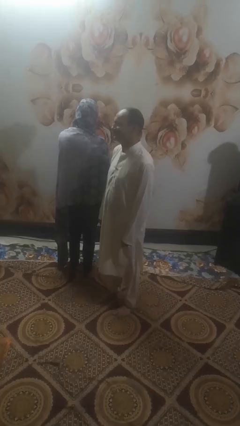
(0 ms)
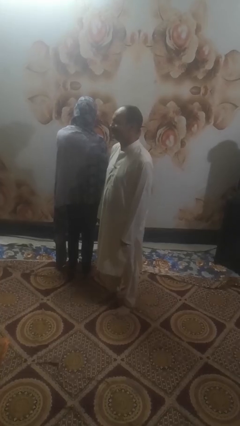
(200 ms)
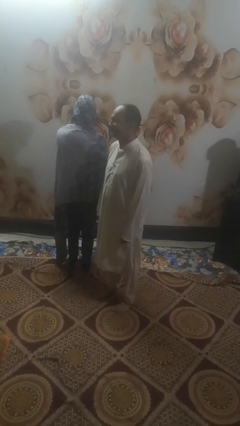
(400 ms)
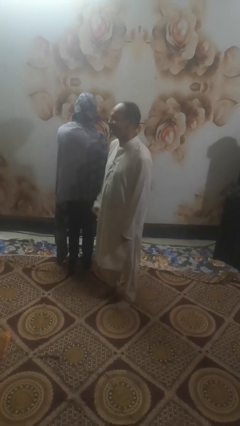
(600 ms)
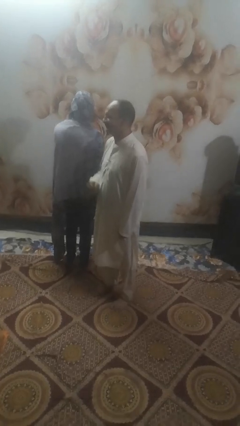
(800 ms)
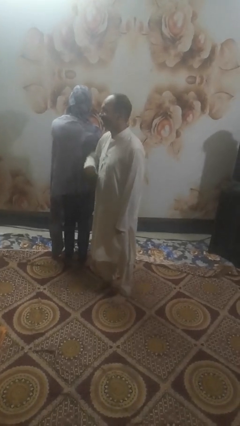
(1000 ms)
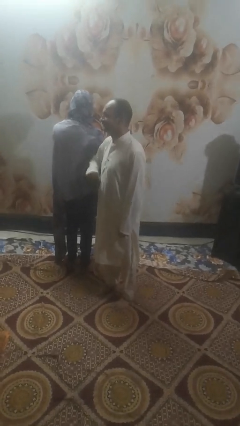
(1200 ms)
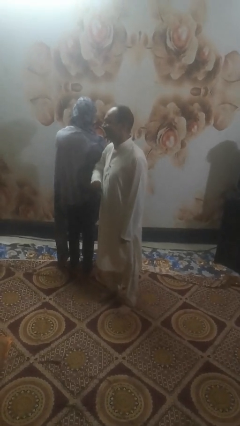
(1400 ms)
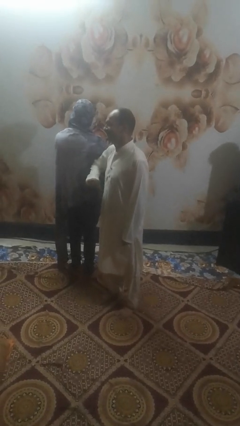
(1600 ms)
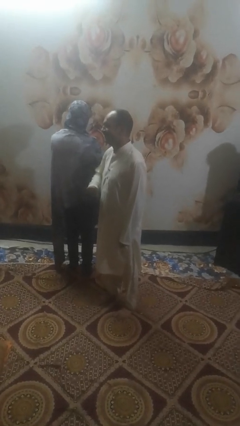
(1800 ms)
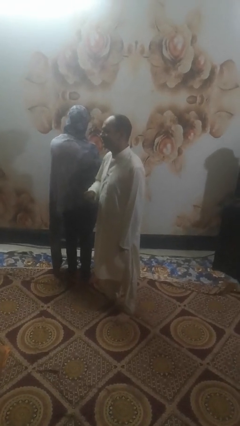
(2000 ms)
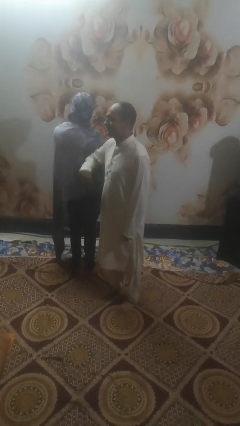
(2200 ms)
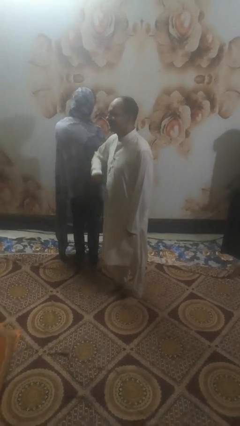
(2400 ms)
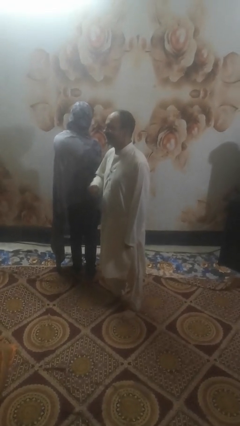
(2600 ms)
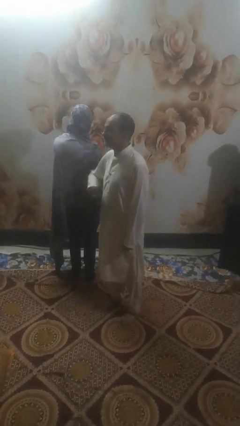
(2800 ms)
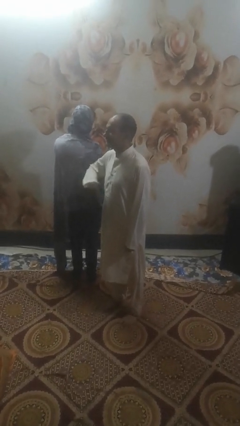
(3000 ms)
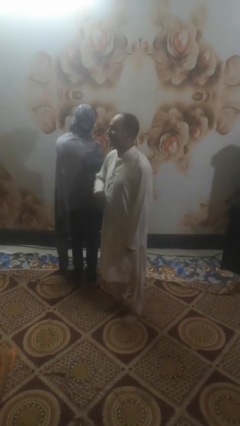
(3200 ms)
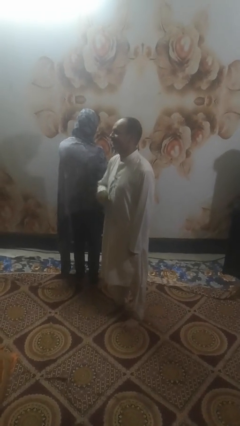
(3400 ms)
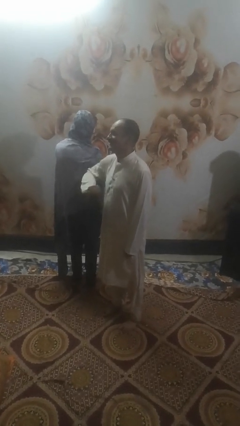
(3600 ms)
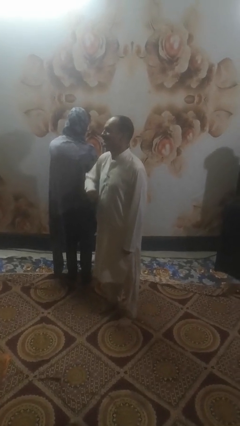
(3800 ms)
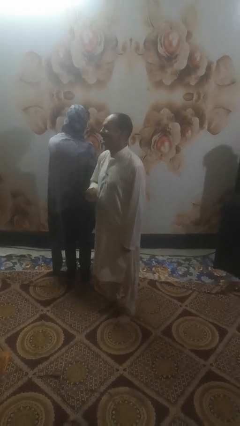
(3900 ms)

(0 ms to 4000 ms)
person nudges person with elbow

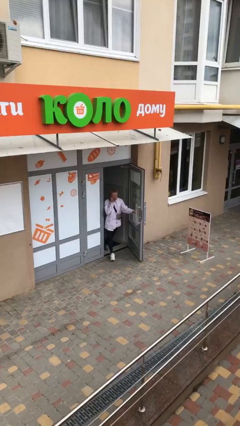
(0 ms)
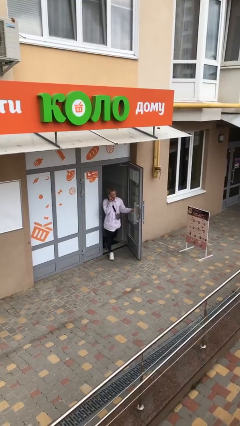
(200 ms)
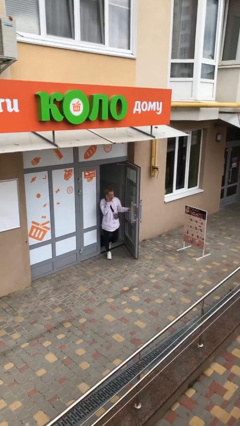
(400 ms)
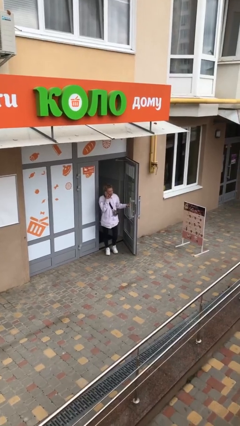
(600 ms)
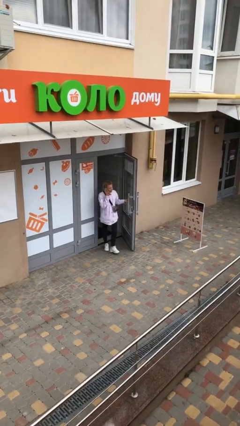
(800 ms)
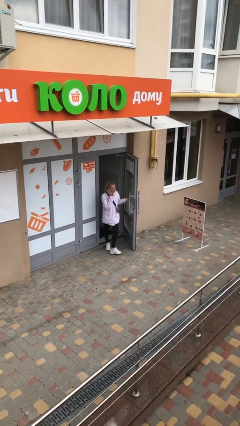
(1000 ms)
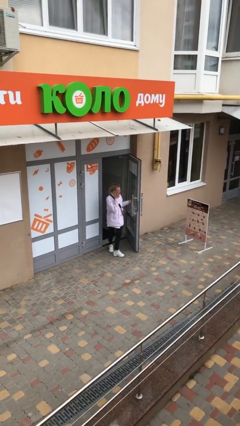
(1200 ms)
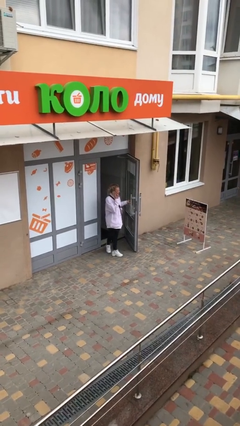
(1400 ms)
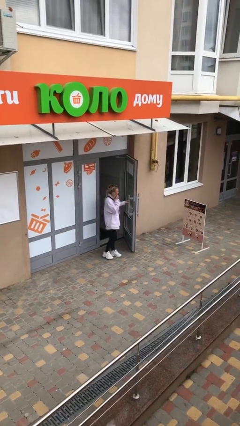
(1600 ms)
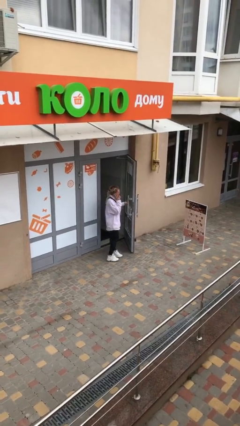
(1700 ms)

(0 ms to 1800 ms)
person enters scene through structure

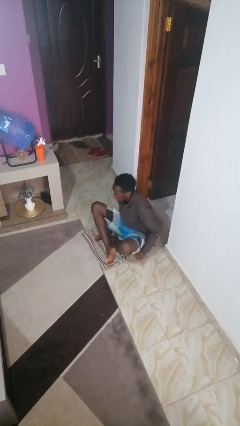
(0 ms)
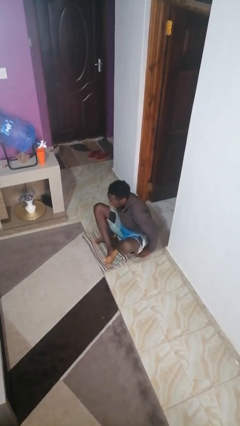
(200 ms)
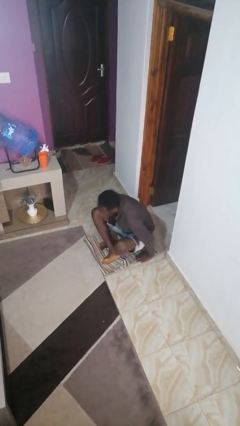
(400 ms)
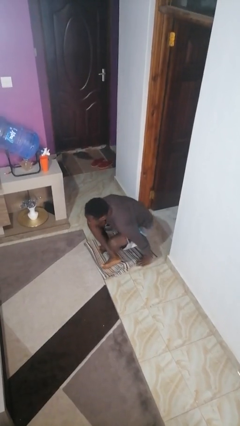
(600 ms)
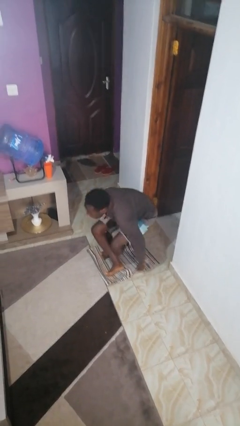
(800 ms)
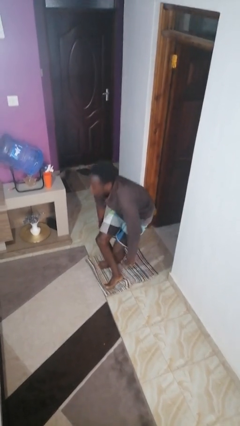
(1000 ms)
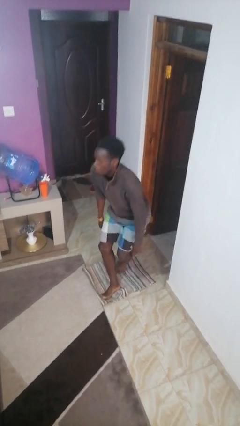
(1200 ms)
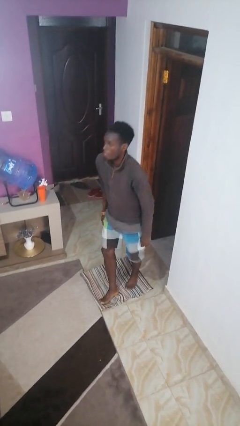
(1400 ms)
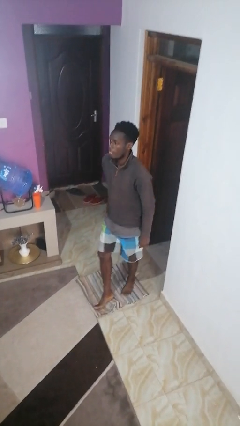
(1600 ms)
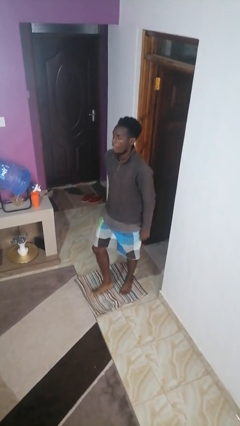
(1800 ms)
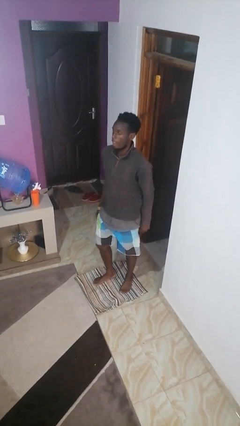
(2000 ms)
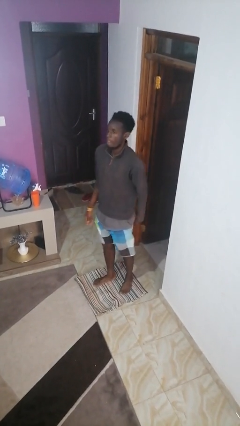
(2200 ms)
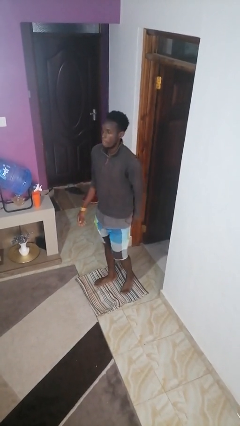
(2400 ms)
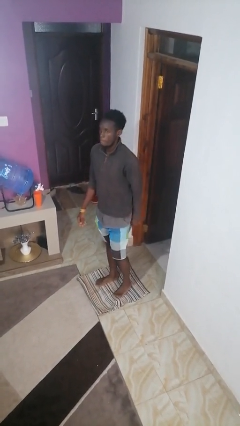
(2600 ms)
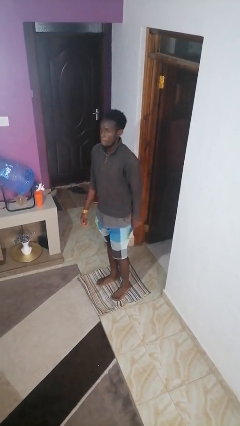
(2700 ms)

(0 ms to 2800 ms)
person stands up from floor

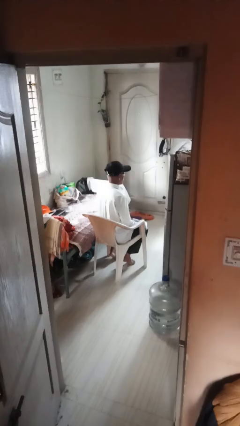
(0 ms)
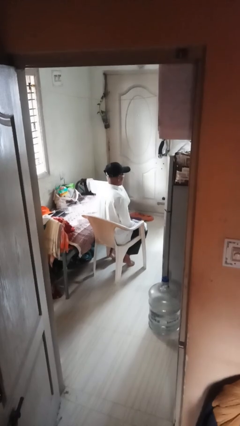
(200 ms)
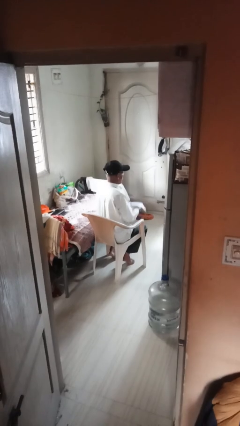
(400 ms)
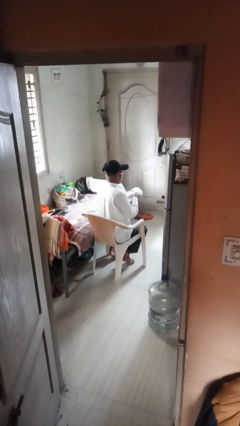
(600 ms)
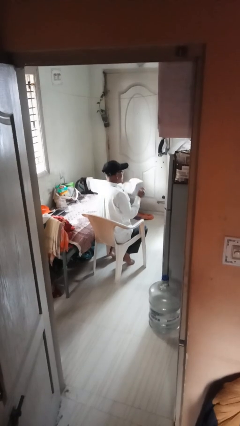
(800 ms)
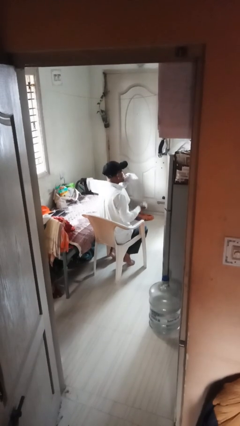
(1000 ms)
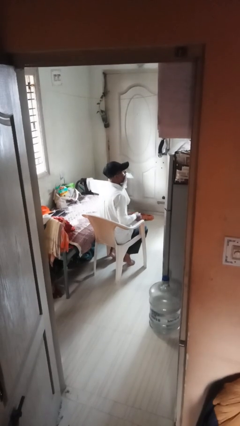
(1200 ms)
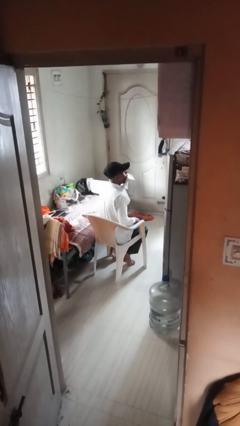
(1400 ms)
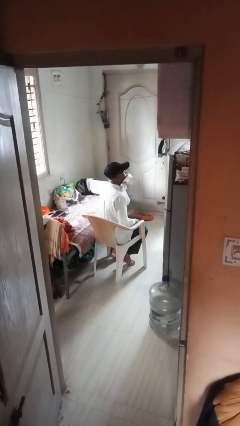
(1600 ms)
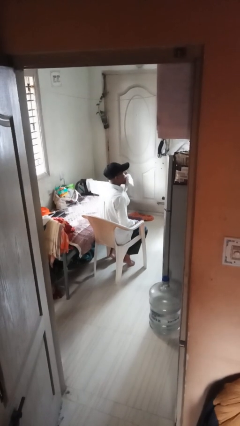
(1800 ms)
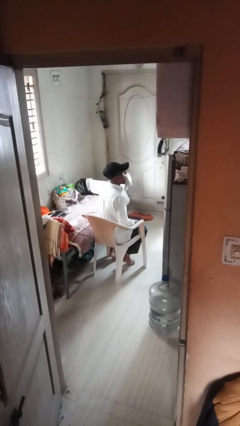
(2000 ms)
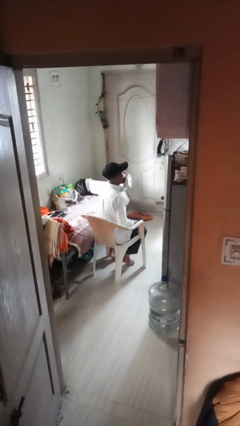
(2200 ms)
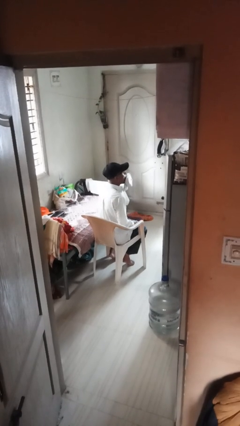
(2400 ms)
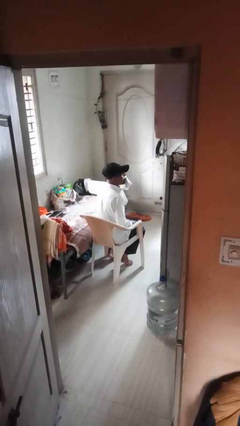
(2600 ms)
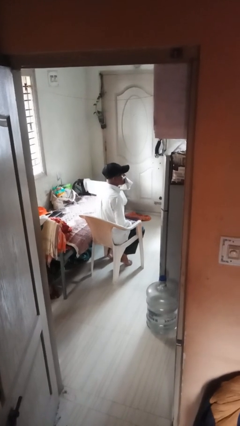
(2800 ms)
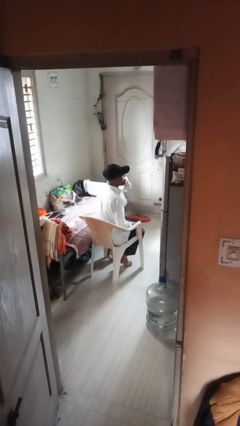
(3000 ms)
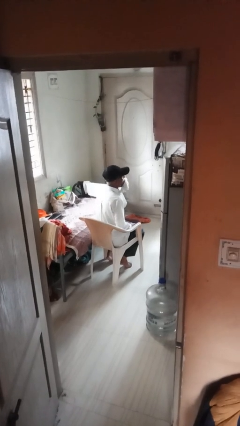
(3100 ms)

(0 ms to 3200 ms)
person wipes mouth with napkin

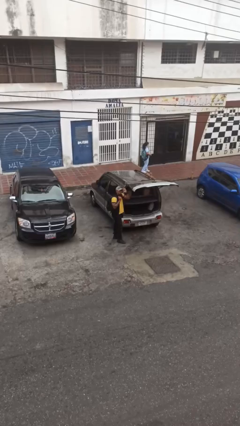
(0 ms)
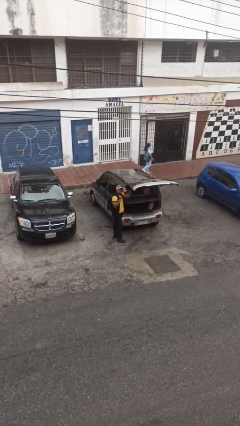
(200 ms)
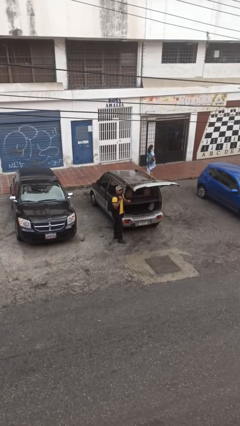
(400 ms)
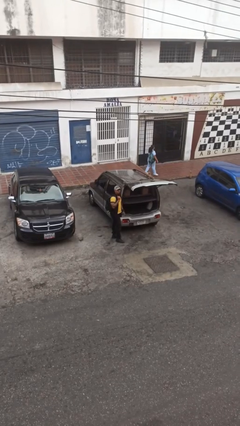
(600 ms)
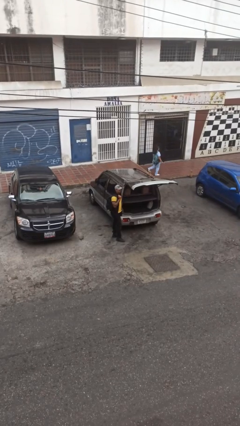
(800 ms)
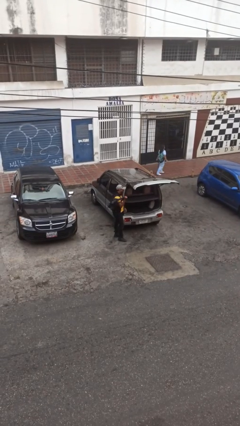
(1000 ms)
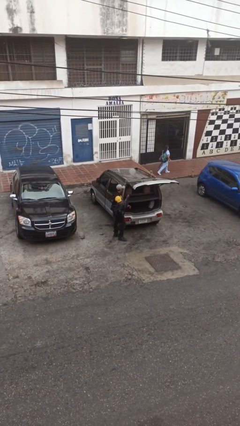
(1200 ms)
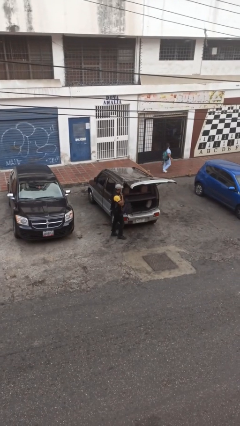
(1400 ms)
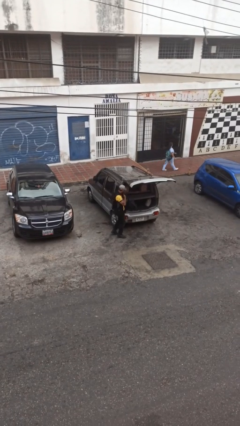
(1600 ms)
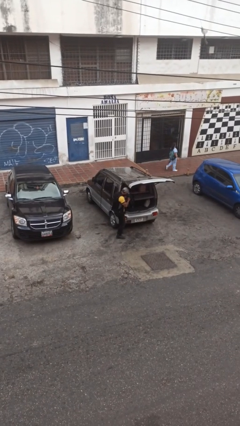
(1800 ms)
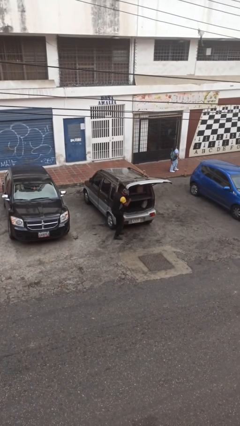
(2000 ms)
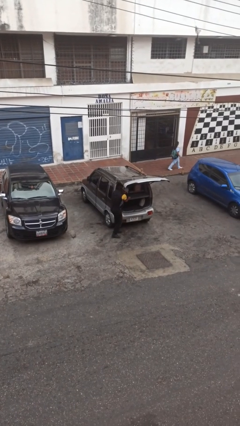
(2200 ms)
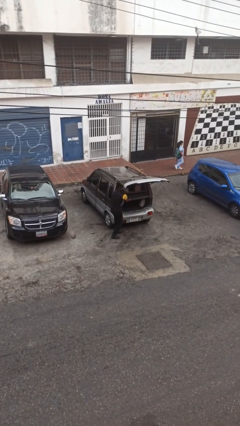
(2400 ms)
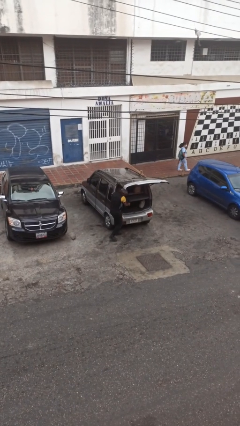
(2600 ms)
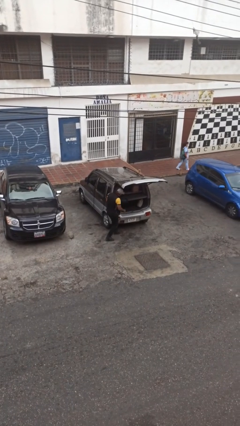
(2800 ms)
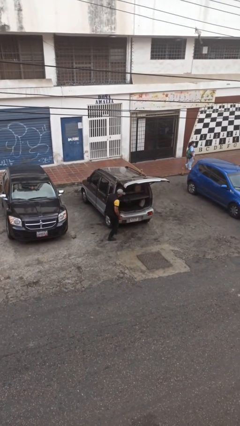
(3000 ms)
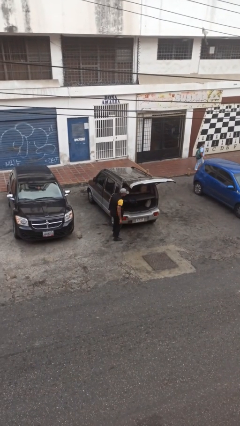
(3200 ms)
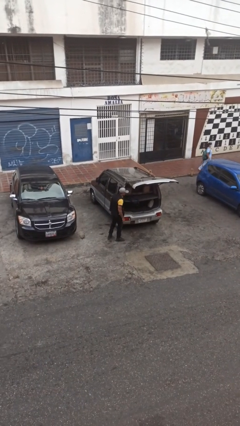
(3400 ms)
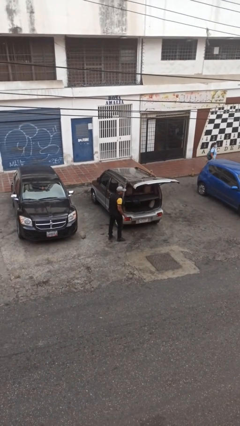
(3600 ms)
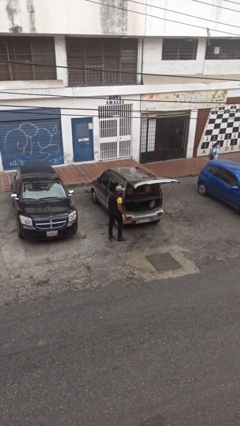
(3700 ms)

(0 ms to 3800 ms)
person loads car

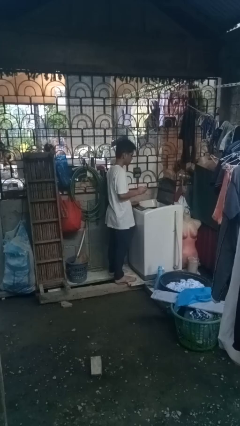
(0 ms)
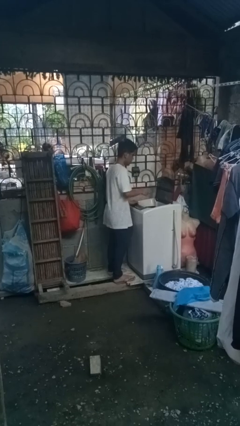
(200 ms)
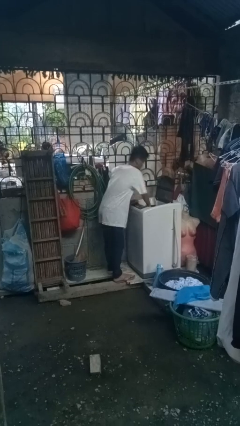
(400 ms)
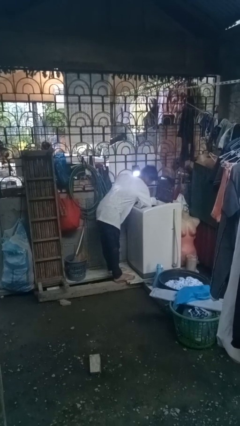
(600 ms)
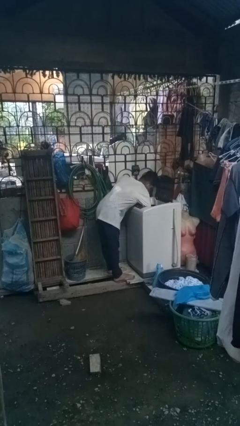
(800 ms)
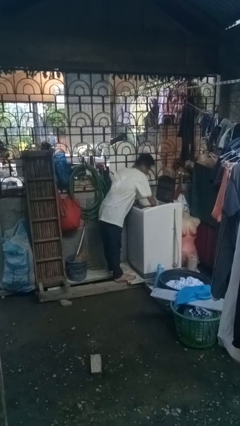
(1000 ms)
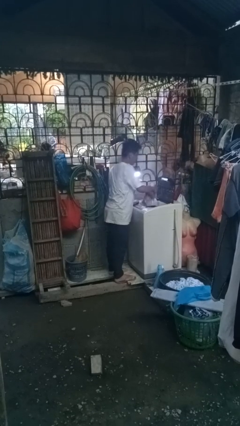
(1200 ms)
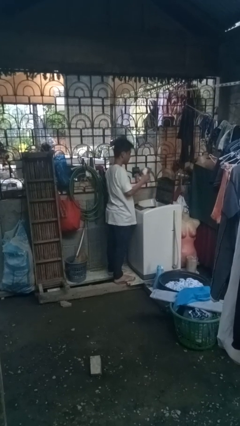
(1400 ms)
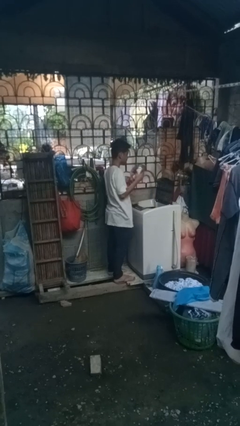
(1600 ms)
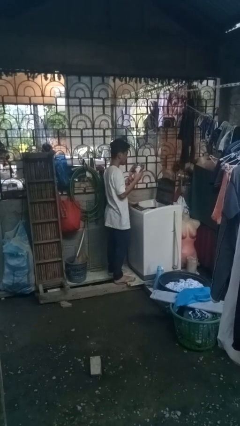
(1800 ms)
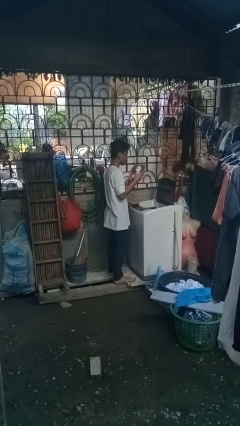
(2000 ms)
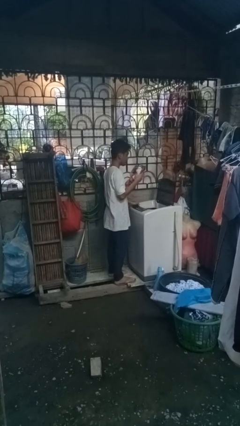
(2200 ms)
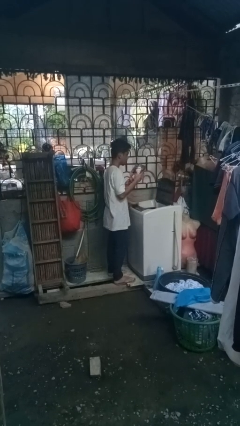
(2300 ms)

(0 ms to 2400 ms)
person unloads clotheswasher
